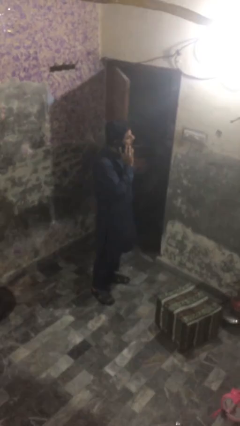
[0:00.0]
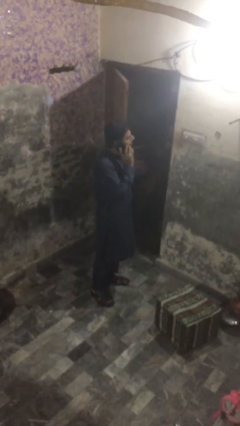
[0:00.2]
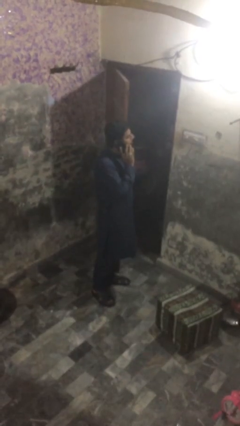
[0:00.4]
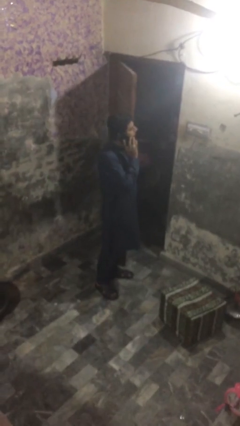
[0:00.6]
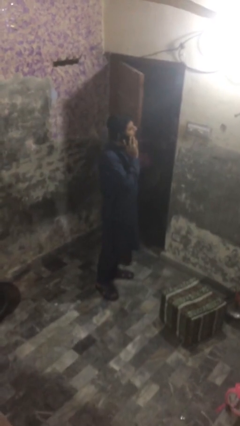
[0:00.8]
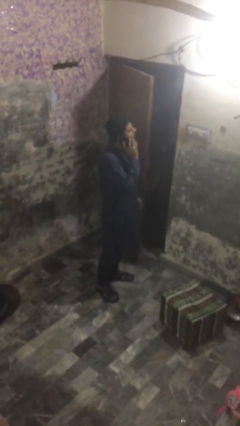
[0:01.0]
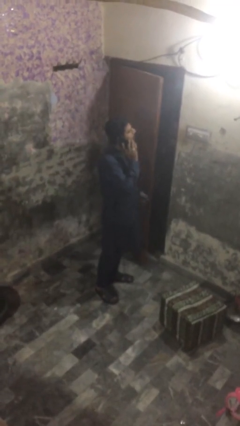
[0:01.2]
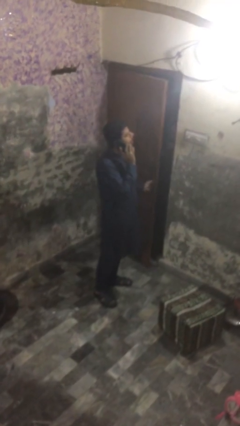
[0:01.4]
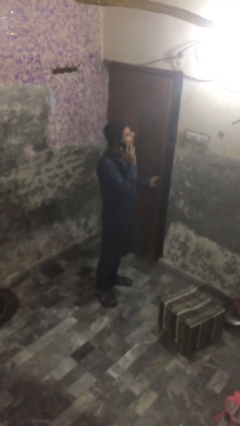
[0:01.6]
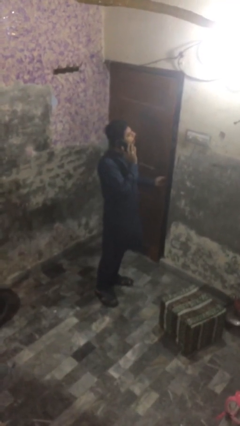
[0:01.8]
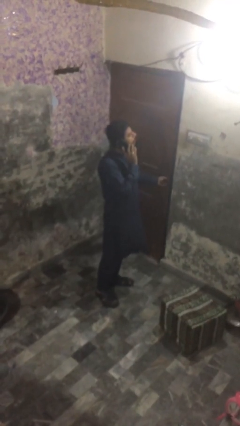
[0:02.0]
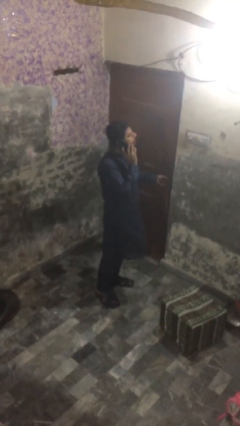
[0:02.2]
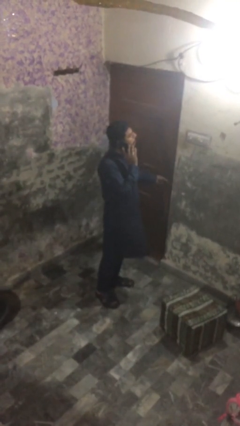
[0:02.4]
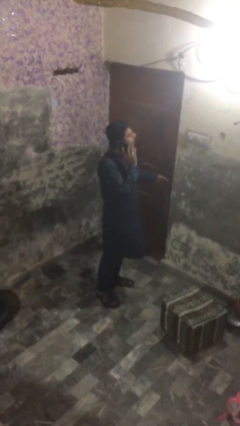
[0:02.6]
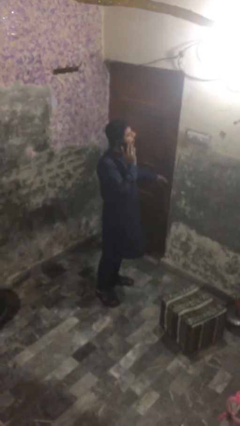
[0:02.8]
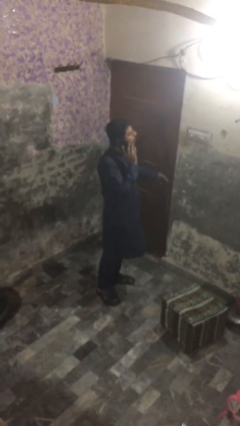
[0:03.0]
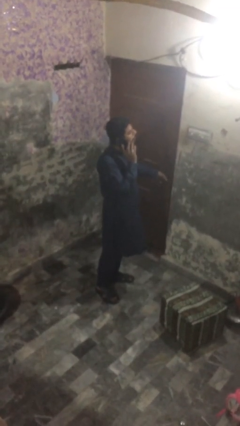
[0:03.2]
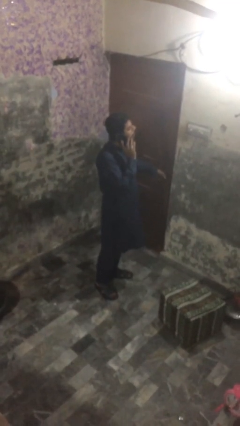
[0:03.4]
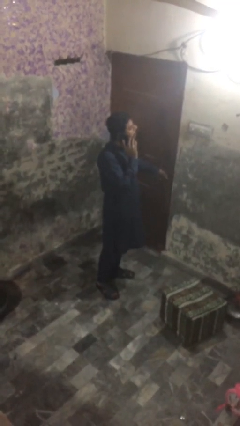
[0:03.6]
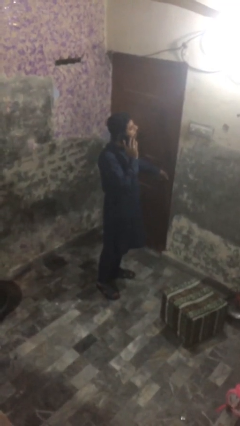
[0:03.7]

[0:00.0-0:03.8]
person closes facility door

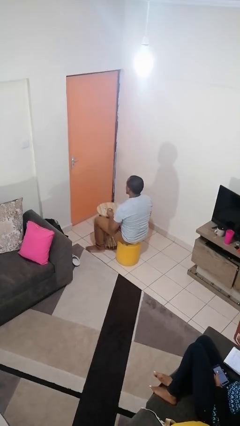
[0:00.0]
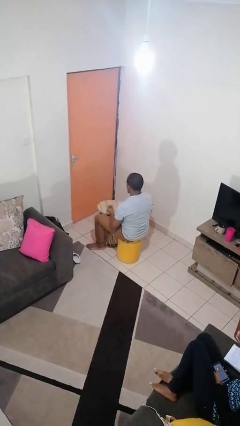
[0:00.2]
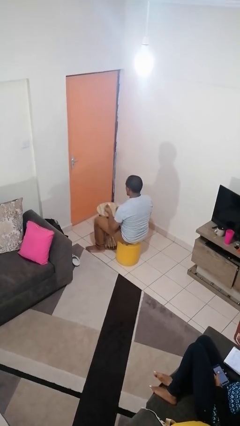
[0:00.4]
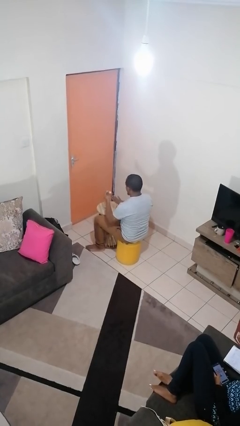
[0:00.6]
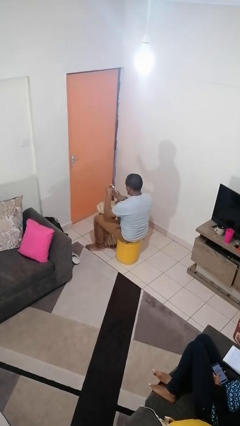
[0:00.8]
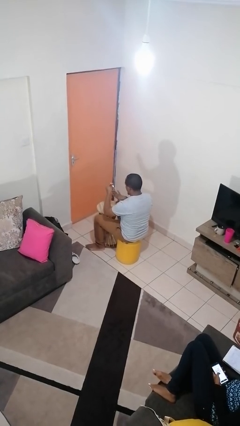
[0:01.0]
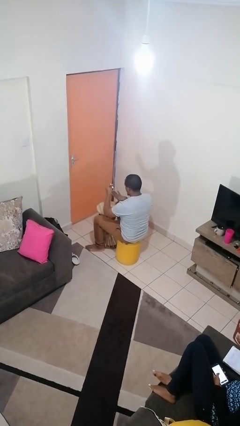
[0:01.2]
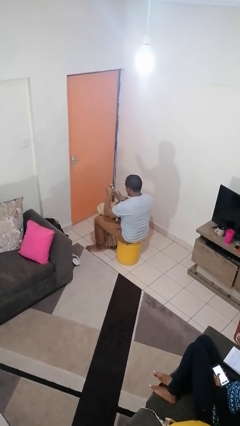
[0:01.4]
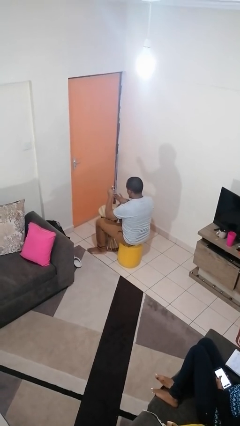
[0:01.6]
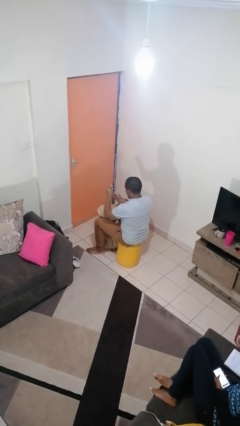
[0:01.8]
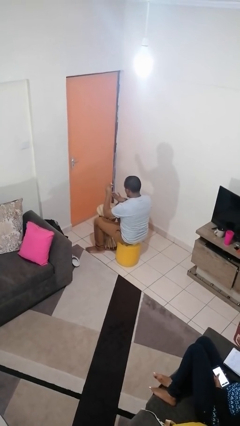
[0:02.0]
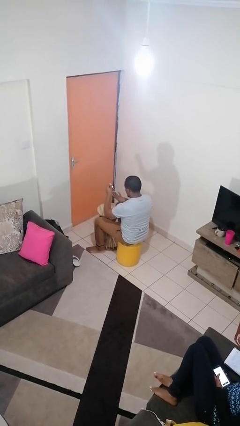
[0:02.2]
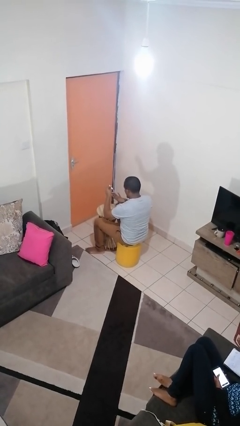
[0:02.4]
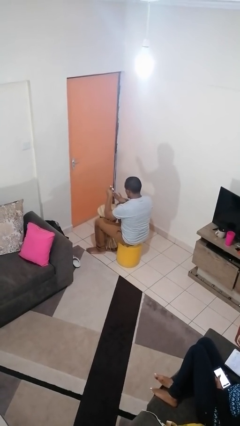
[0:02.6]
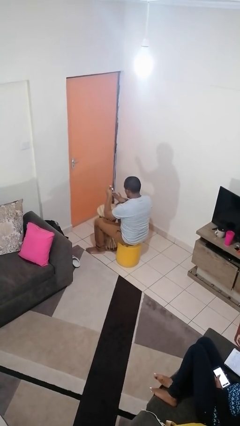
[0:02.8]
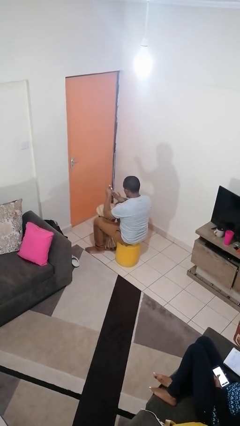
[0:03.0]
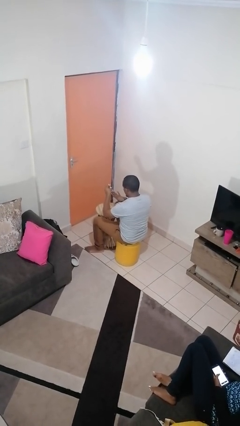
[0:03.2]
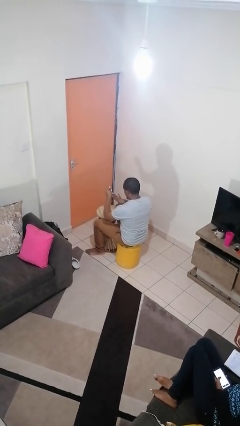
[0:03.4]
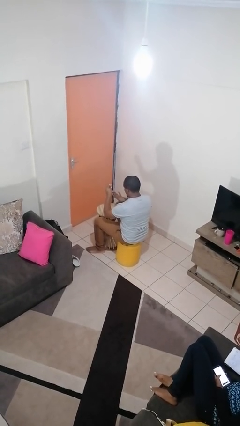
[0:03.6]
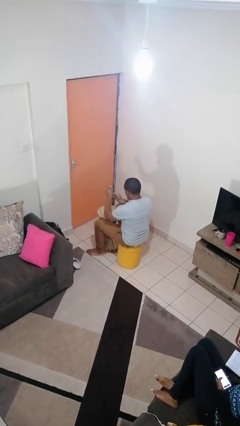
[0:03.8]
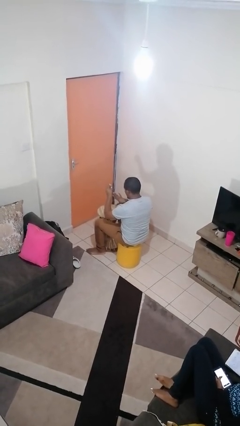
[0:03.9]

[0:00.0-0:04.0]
person paints fingernails

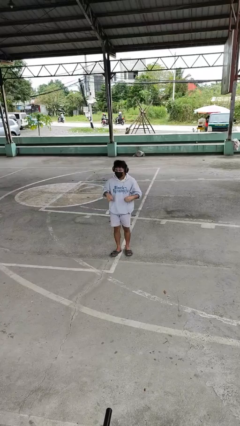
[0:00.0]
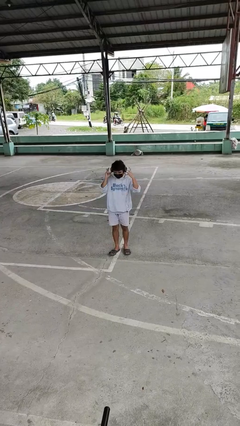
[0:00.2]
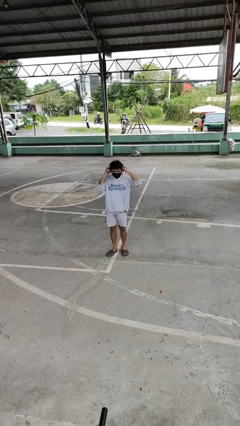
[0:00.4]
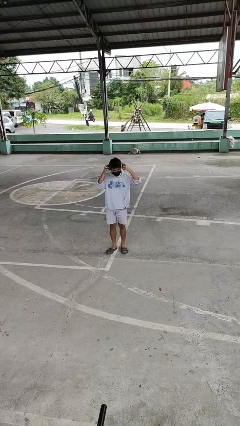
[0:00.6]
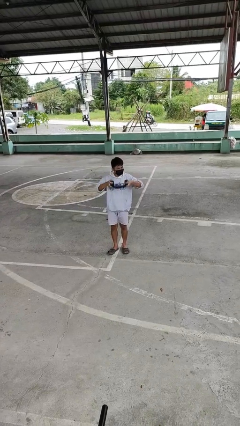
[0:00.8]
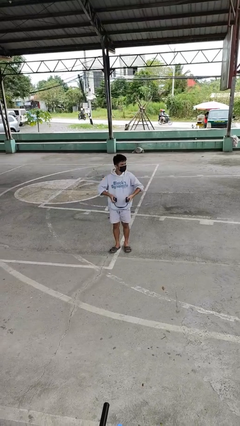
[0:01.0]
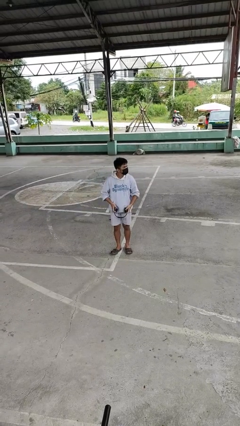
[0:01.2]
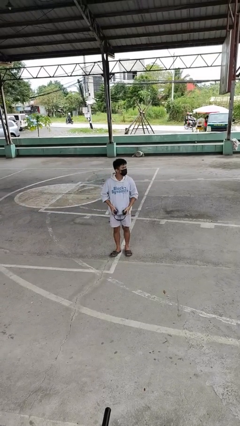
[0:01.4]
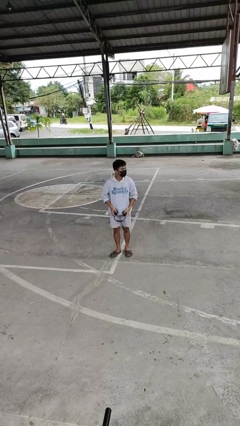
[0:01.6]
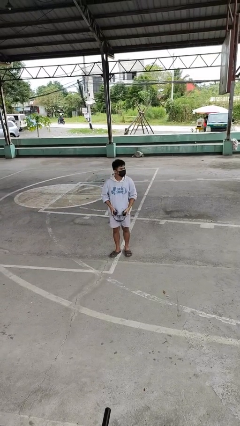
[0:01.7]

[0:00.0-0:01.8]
person takes off headphones

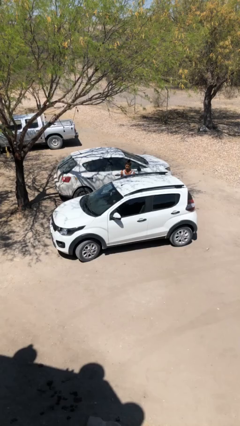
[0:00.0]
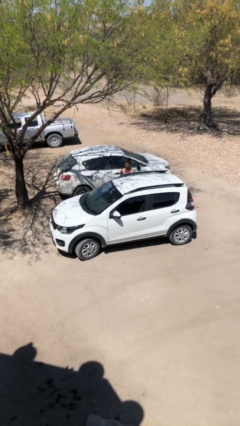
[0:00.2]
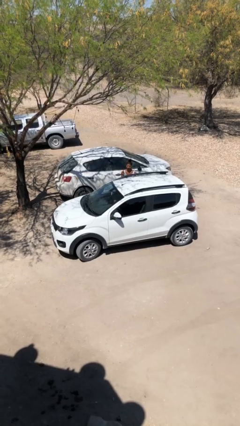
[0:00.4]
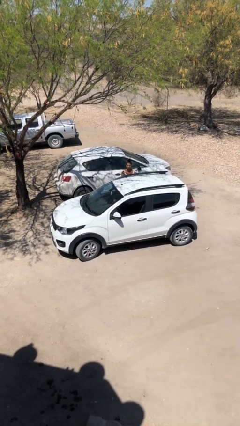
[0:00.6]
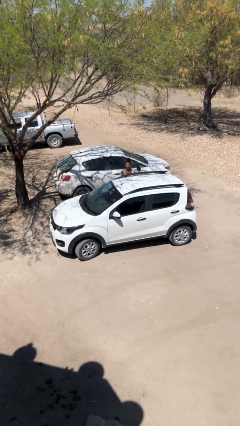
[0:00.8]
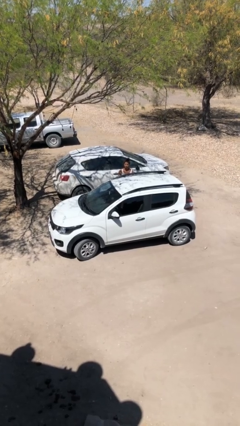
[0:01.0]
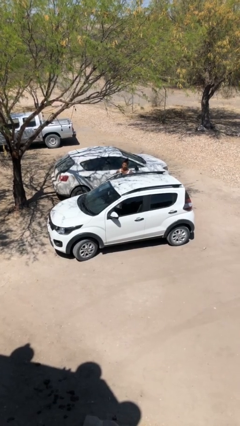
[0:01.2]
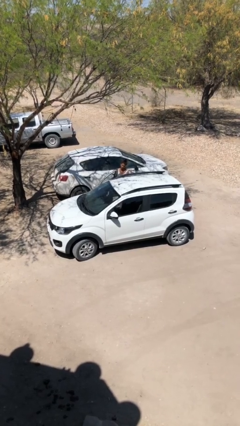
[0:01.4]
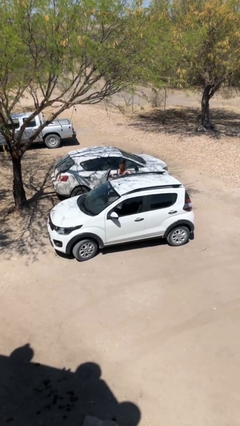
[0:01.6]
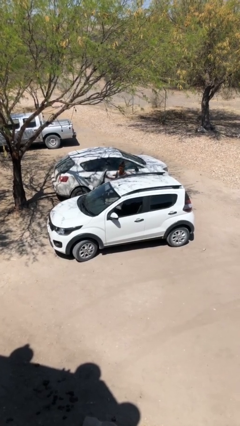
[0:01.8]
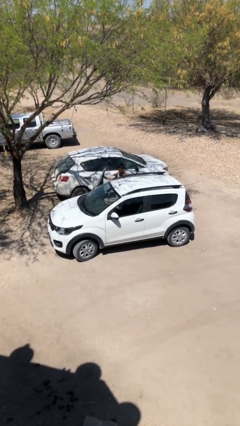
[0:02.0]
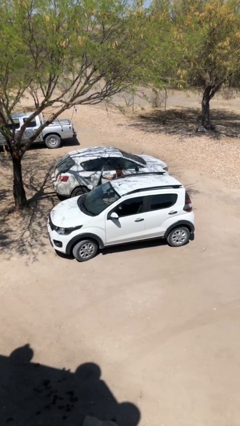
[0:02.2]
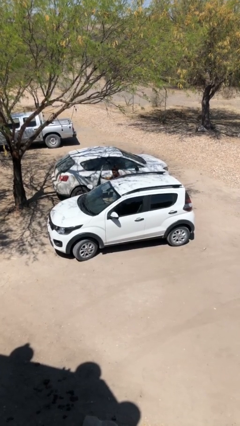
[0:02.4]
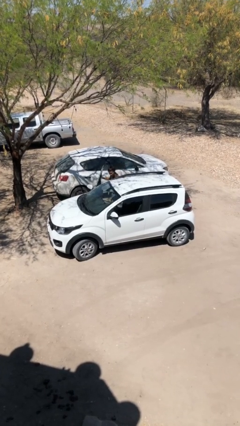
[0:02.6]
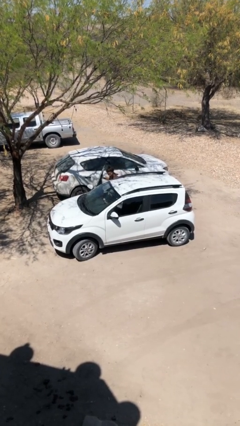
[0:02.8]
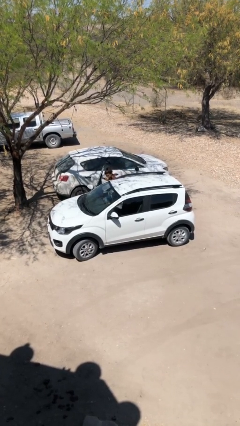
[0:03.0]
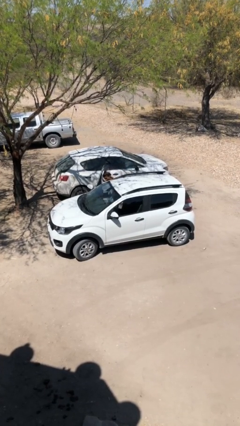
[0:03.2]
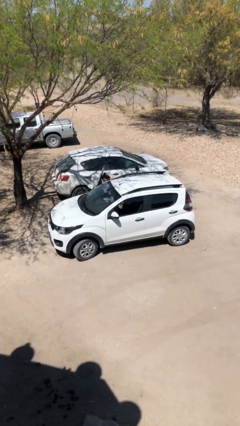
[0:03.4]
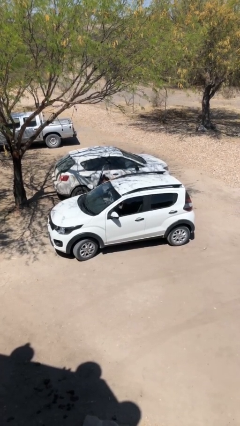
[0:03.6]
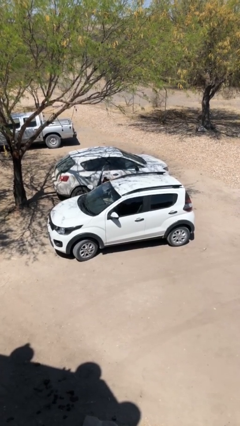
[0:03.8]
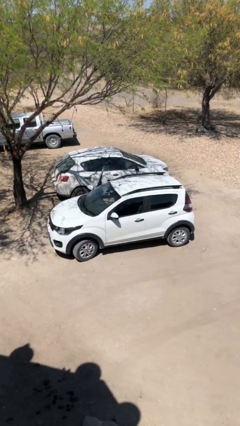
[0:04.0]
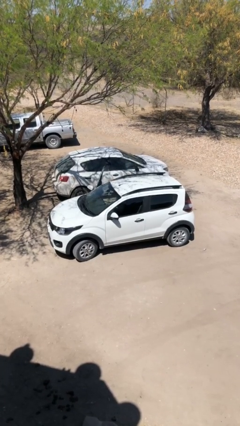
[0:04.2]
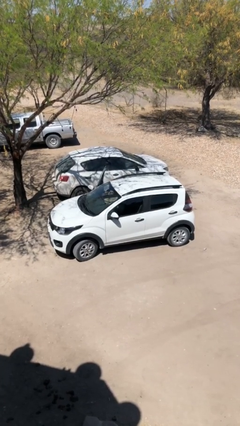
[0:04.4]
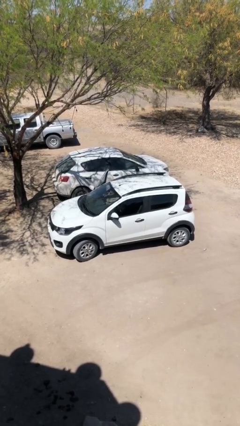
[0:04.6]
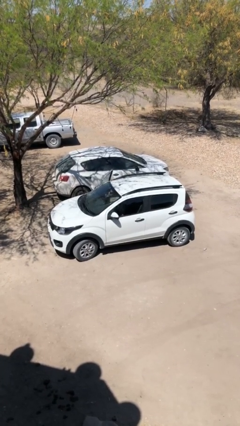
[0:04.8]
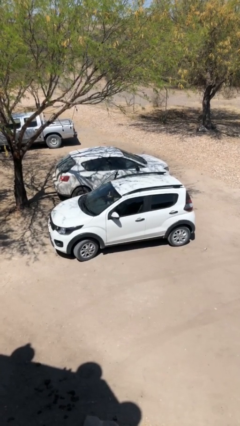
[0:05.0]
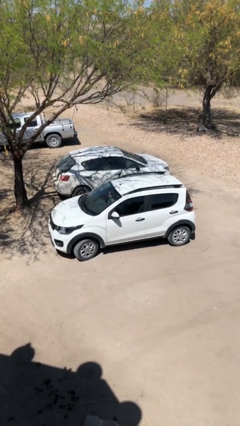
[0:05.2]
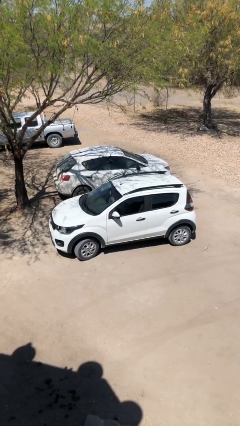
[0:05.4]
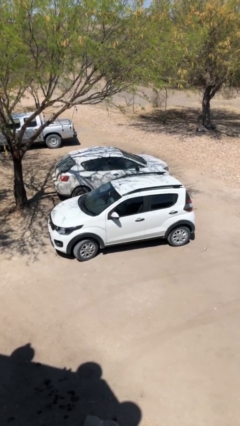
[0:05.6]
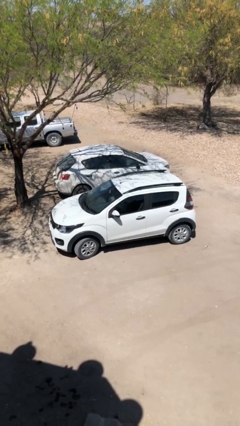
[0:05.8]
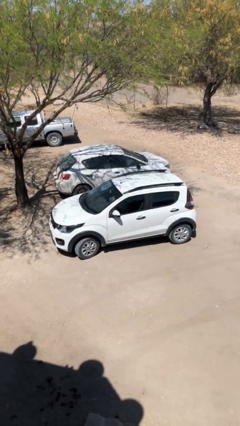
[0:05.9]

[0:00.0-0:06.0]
car picks up person

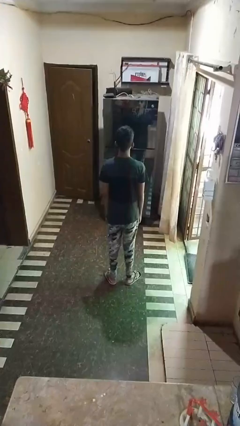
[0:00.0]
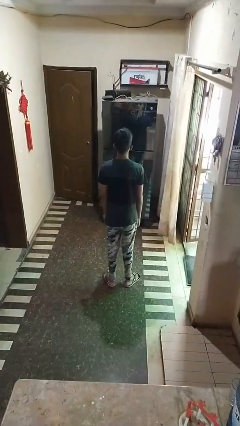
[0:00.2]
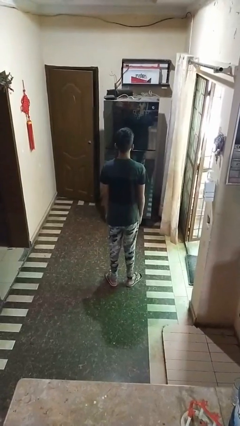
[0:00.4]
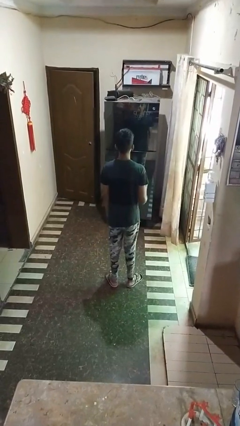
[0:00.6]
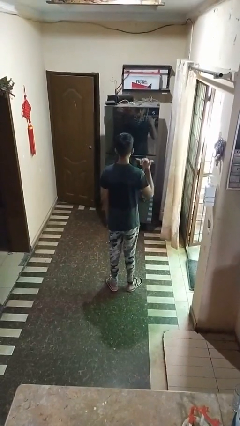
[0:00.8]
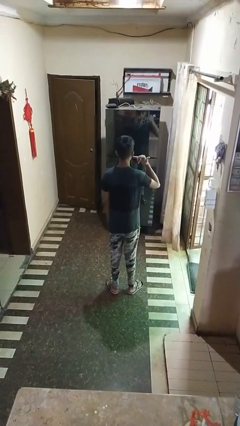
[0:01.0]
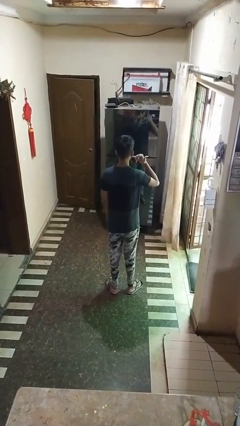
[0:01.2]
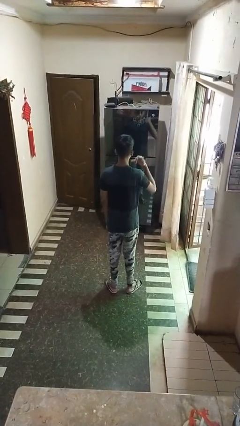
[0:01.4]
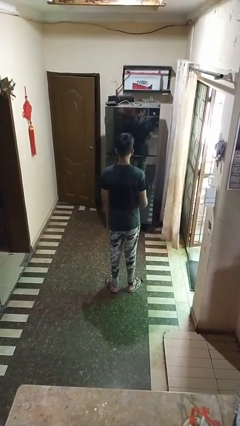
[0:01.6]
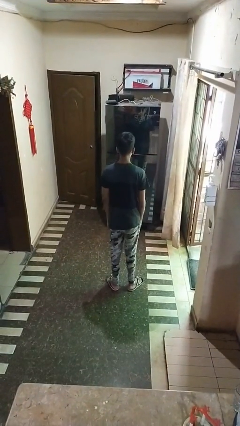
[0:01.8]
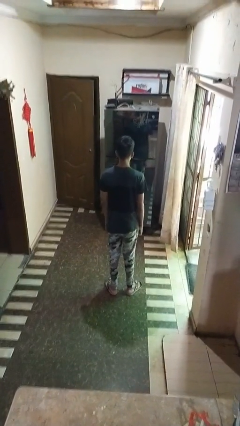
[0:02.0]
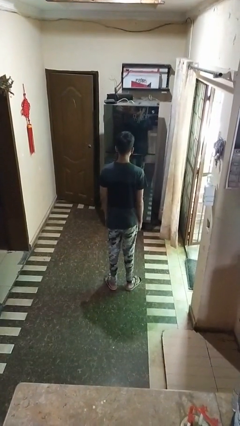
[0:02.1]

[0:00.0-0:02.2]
person gestures call me
